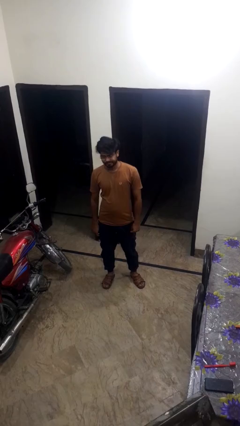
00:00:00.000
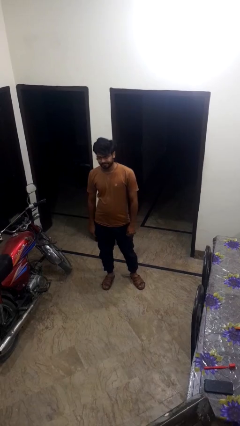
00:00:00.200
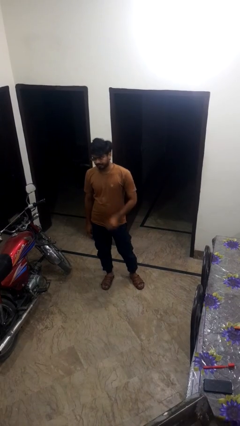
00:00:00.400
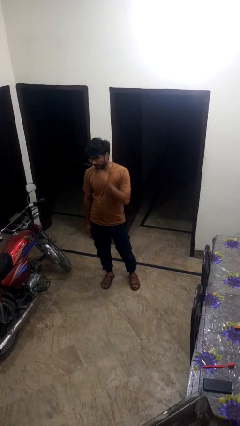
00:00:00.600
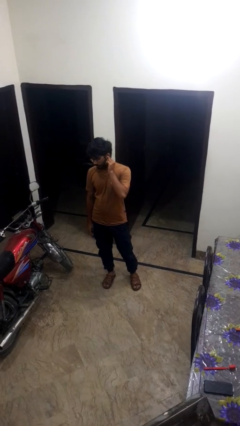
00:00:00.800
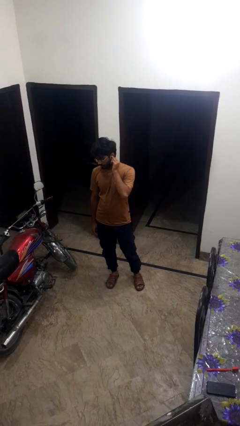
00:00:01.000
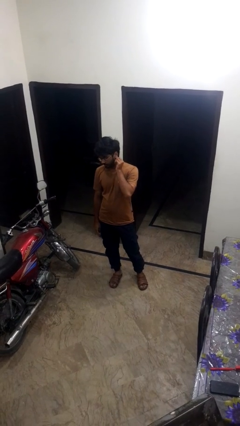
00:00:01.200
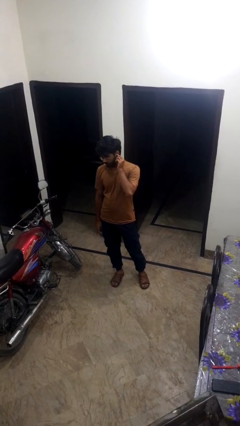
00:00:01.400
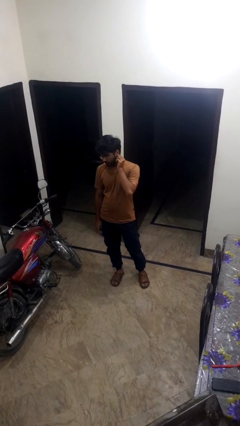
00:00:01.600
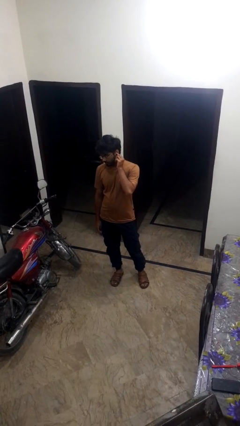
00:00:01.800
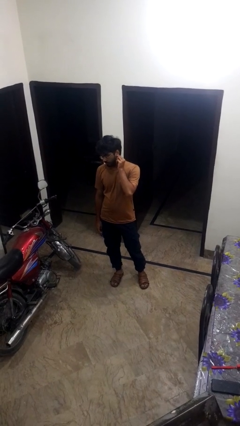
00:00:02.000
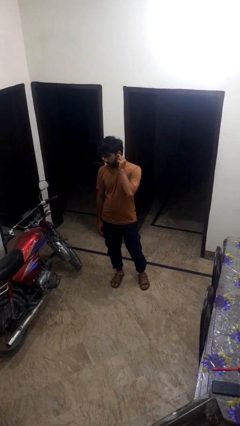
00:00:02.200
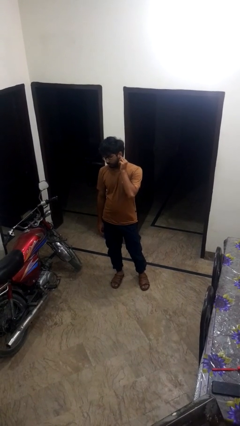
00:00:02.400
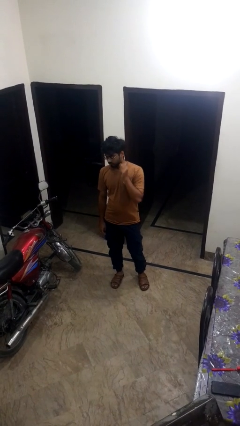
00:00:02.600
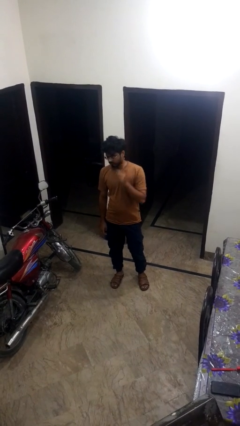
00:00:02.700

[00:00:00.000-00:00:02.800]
person touches earlobe

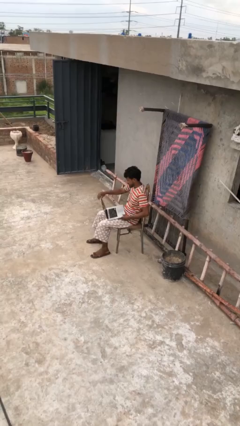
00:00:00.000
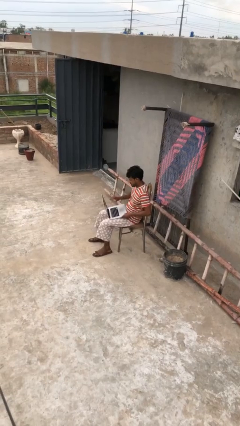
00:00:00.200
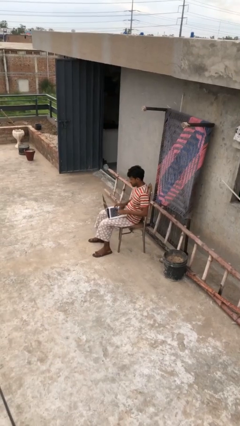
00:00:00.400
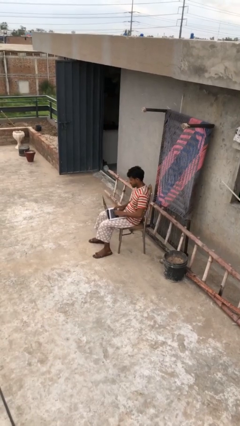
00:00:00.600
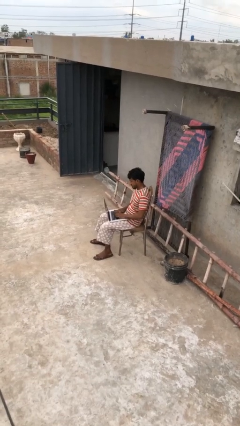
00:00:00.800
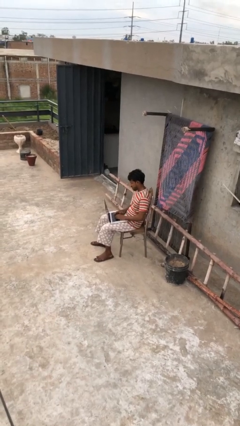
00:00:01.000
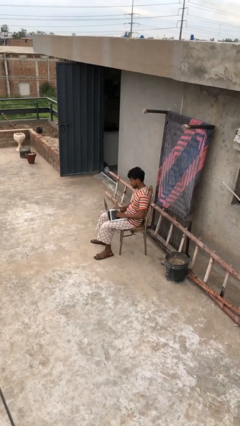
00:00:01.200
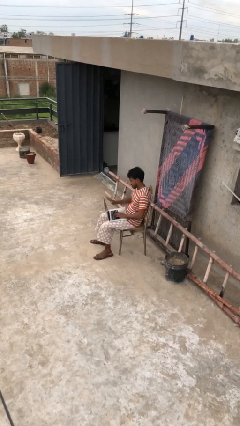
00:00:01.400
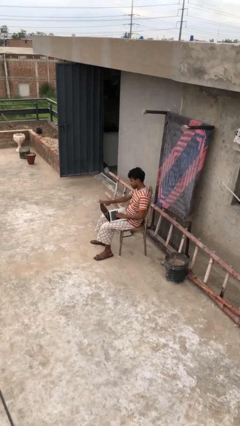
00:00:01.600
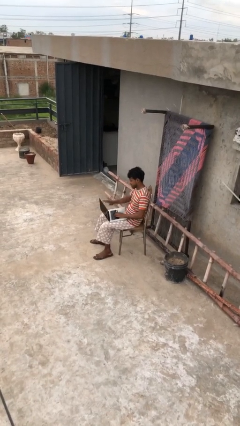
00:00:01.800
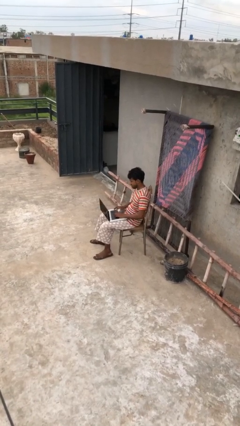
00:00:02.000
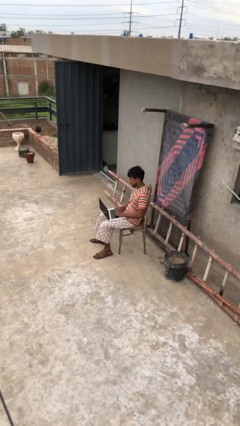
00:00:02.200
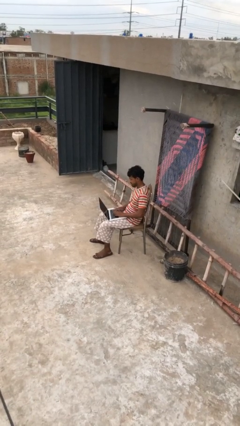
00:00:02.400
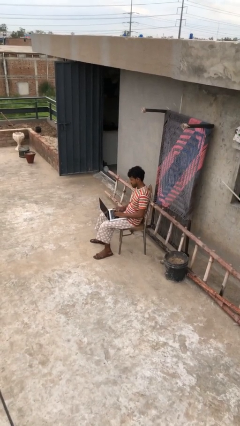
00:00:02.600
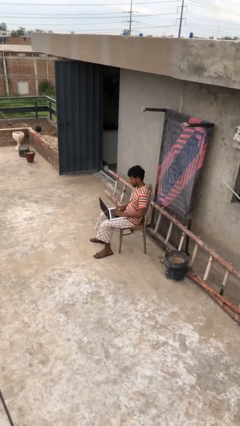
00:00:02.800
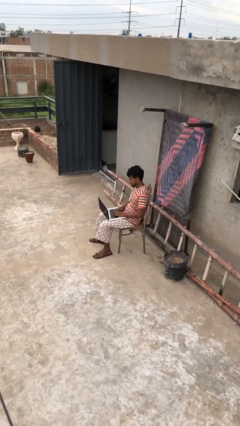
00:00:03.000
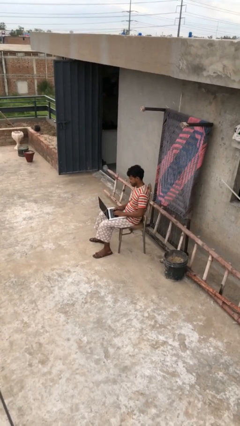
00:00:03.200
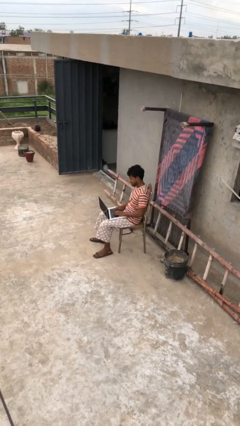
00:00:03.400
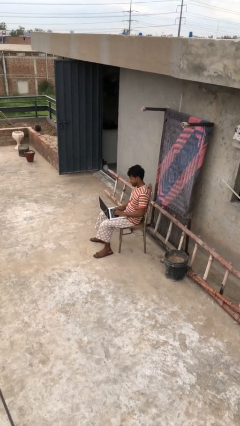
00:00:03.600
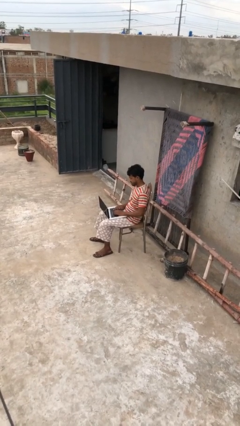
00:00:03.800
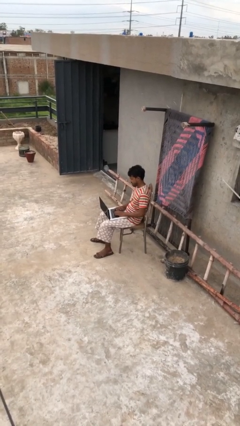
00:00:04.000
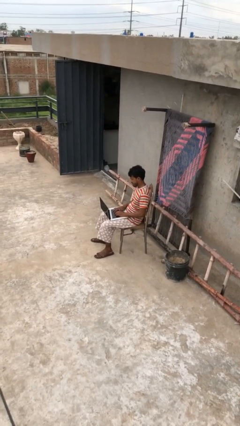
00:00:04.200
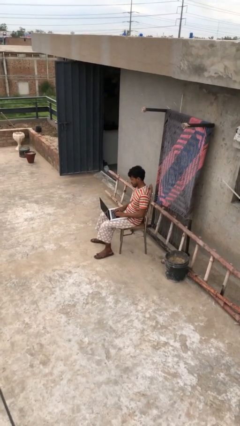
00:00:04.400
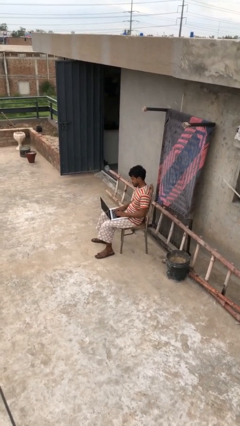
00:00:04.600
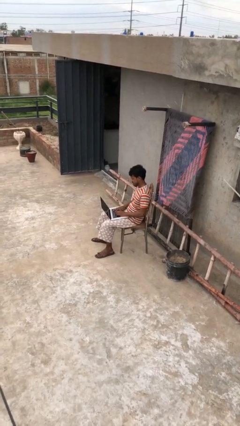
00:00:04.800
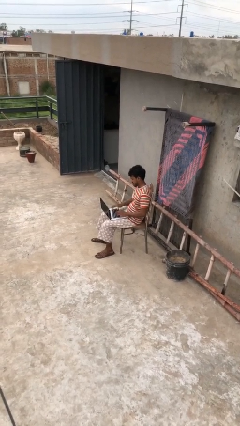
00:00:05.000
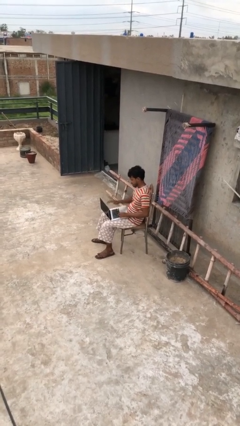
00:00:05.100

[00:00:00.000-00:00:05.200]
person interacts with laptop

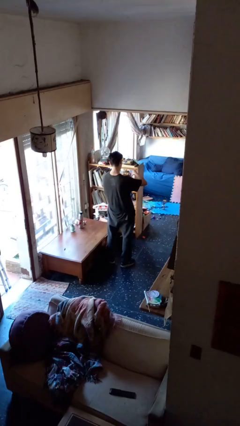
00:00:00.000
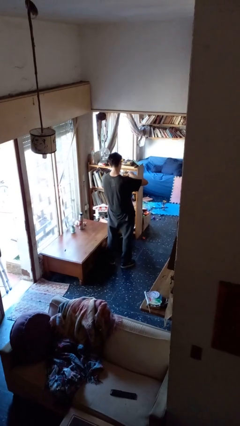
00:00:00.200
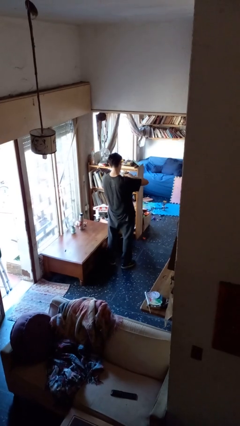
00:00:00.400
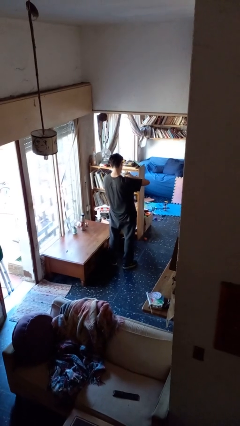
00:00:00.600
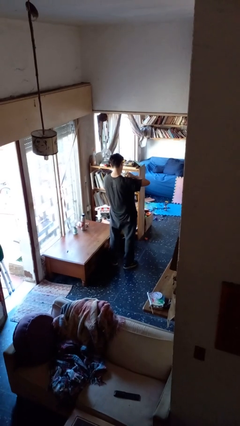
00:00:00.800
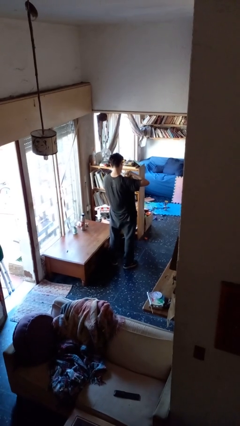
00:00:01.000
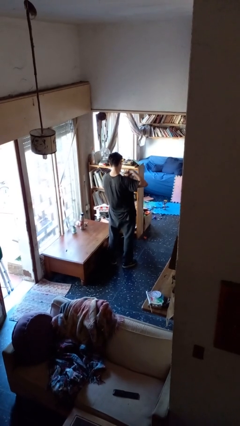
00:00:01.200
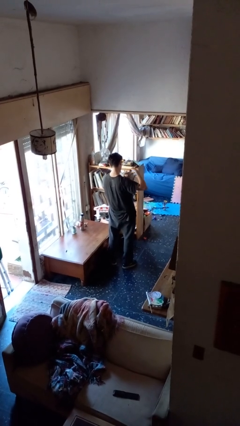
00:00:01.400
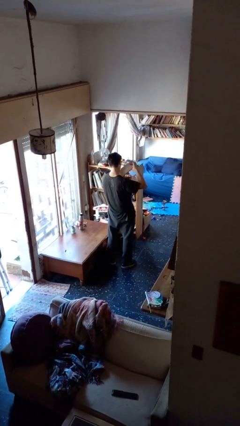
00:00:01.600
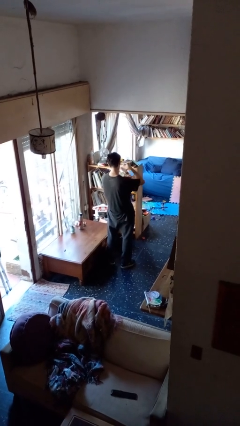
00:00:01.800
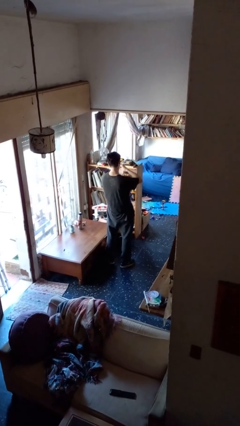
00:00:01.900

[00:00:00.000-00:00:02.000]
person tears paper

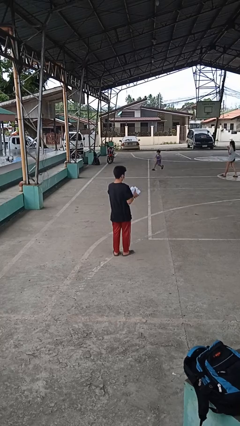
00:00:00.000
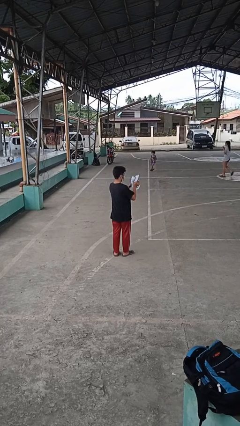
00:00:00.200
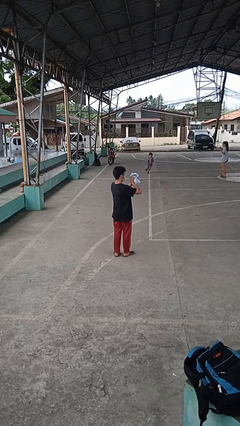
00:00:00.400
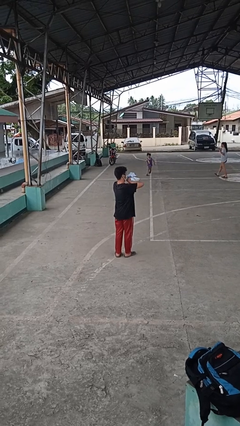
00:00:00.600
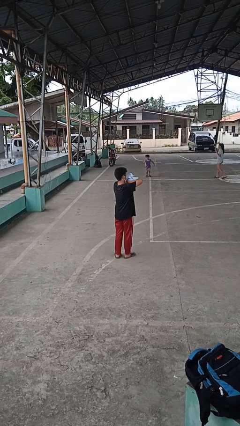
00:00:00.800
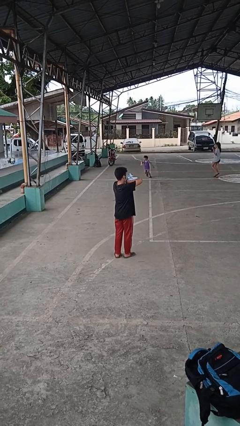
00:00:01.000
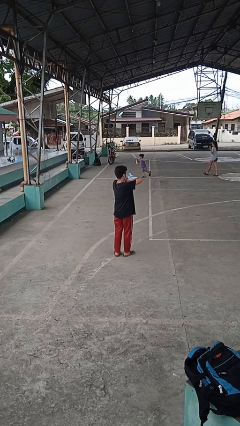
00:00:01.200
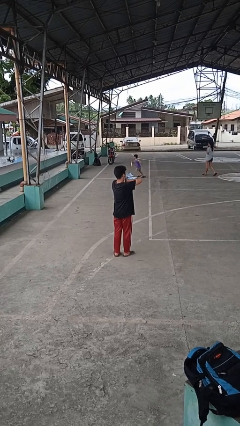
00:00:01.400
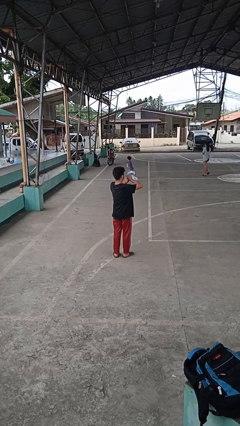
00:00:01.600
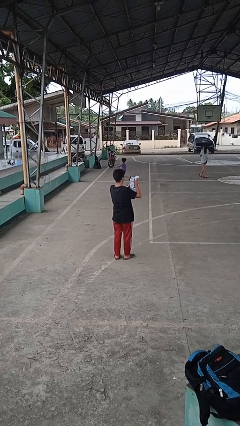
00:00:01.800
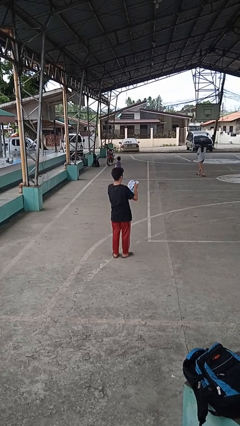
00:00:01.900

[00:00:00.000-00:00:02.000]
person squeezes object

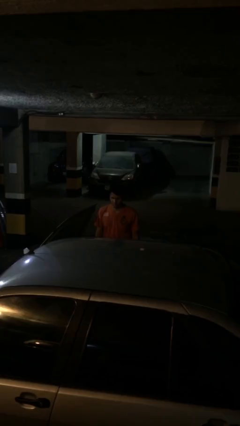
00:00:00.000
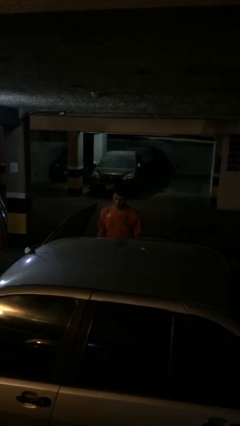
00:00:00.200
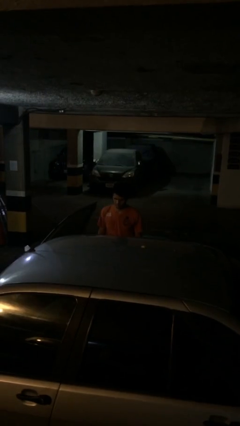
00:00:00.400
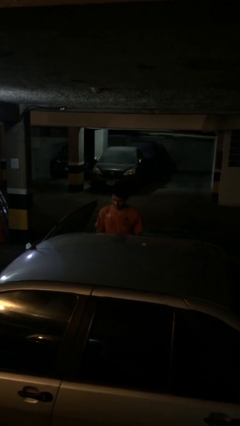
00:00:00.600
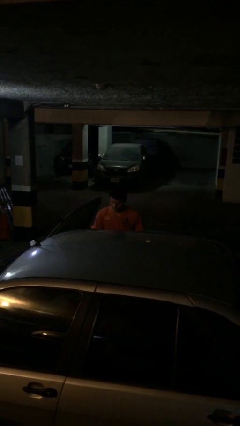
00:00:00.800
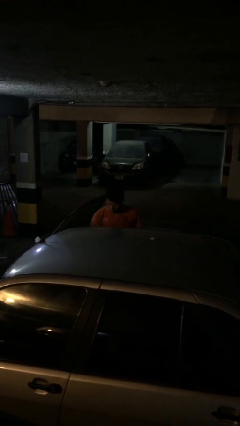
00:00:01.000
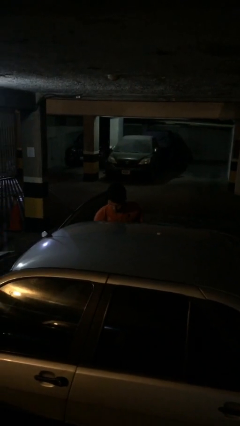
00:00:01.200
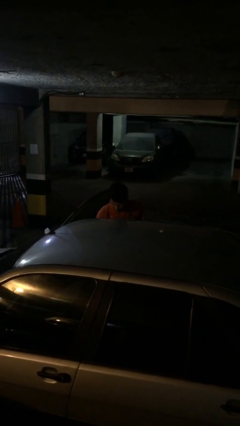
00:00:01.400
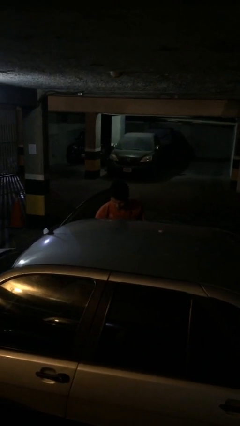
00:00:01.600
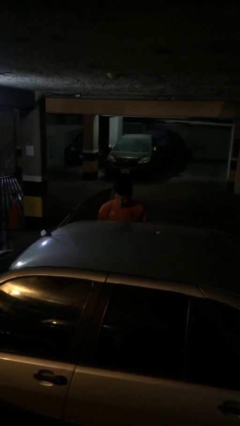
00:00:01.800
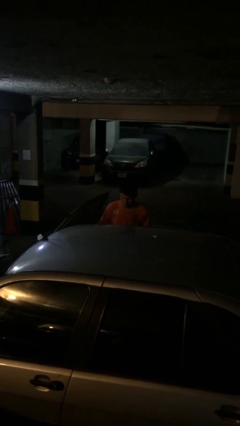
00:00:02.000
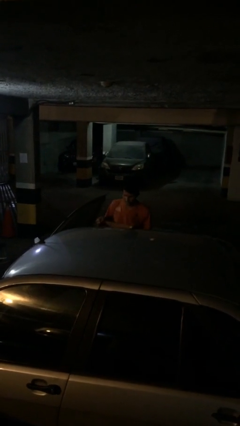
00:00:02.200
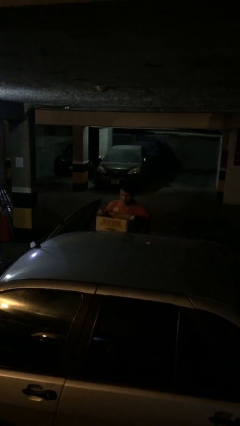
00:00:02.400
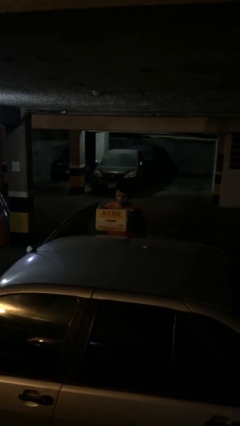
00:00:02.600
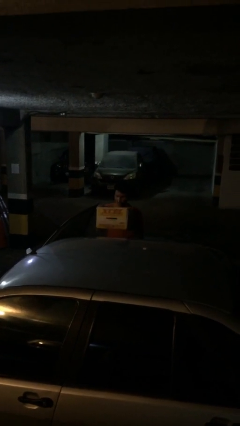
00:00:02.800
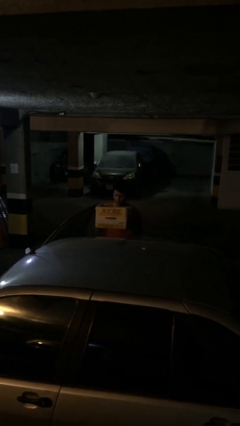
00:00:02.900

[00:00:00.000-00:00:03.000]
person unloads car

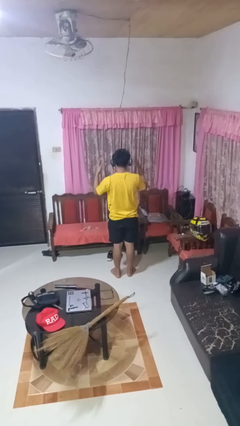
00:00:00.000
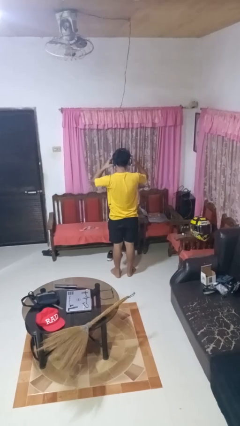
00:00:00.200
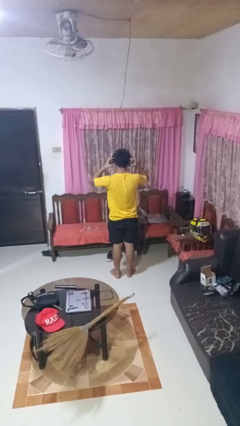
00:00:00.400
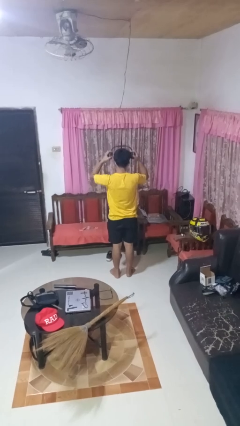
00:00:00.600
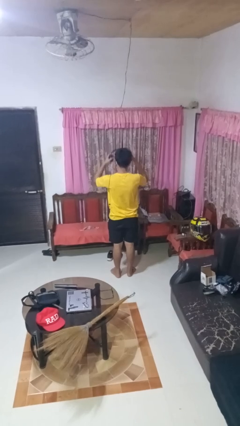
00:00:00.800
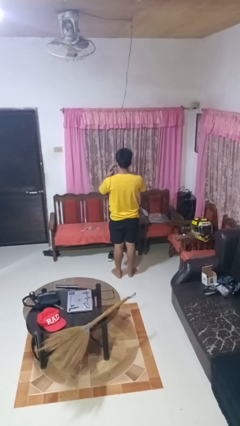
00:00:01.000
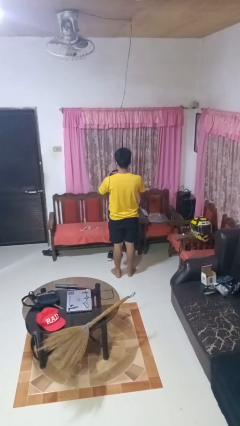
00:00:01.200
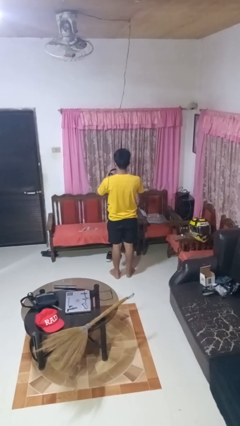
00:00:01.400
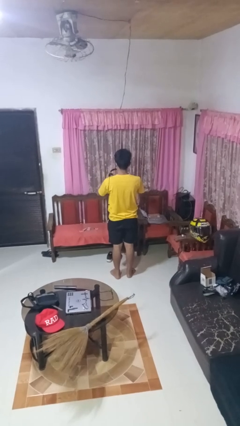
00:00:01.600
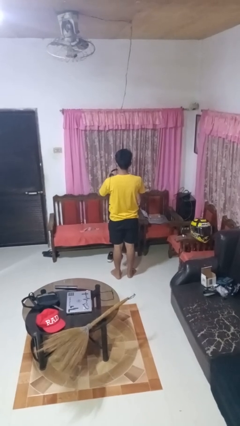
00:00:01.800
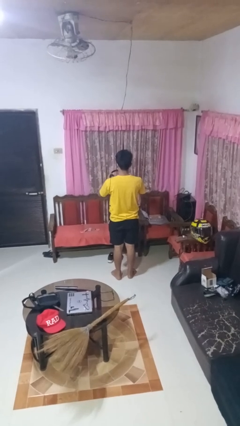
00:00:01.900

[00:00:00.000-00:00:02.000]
person takes off headphones
